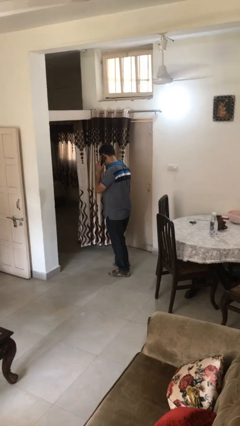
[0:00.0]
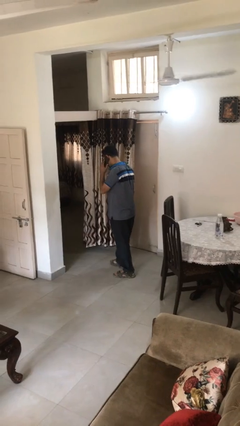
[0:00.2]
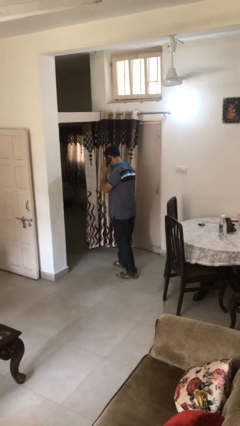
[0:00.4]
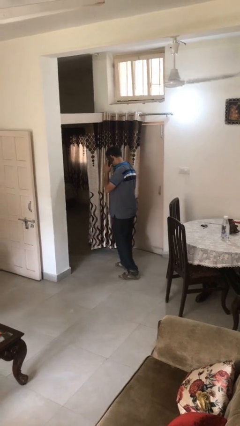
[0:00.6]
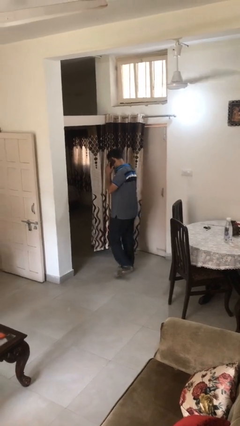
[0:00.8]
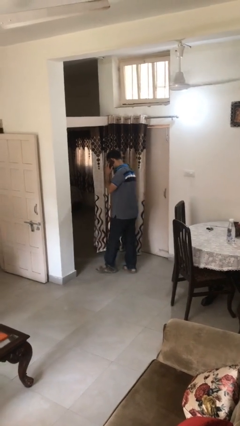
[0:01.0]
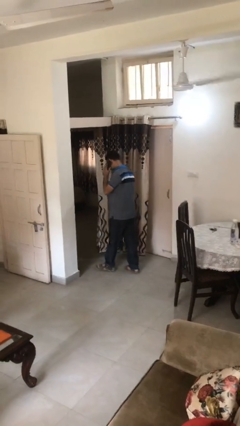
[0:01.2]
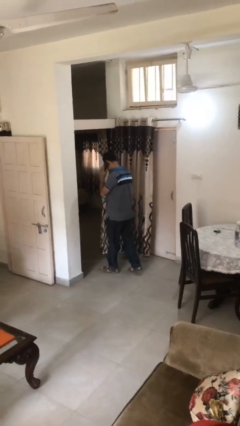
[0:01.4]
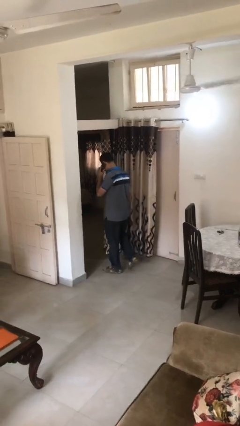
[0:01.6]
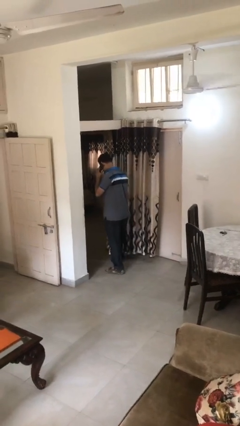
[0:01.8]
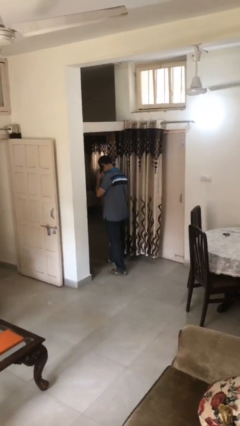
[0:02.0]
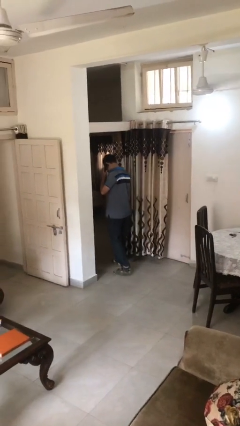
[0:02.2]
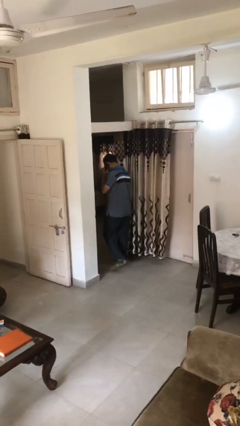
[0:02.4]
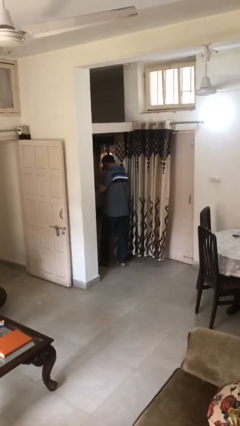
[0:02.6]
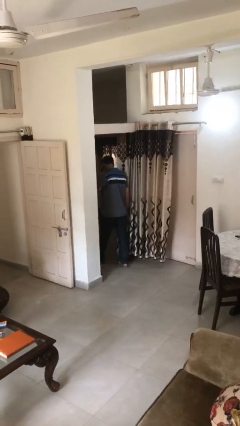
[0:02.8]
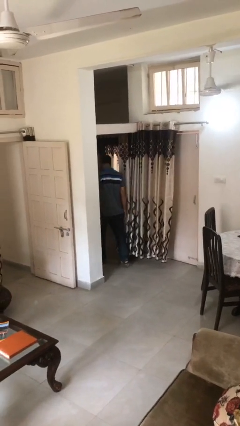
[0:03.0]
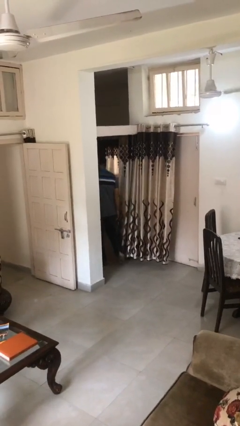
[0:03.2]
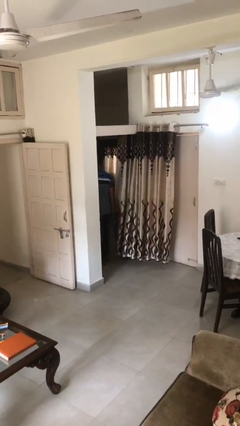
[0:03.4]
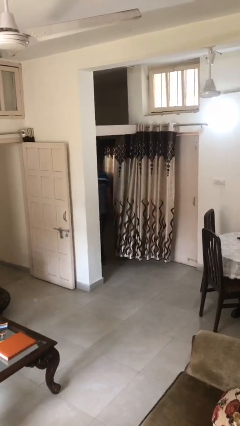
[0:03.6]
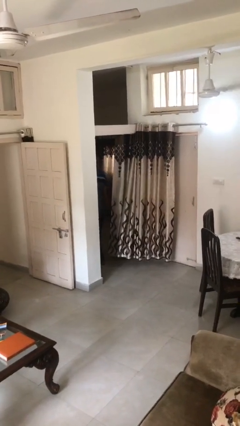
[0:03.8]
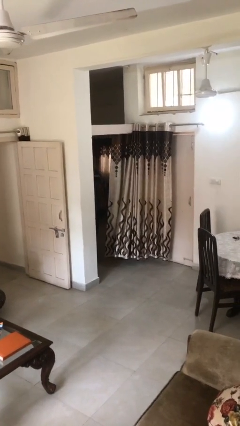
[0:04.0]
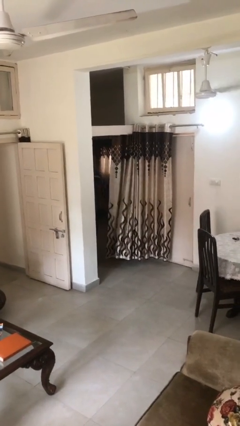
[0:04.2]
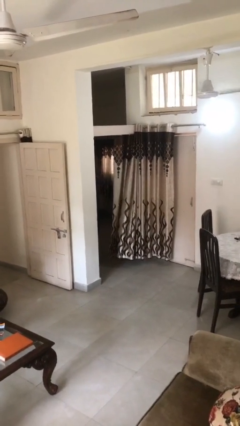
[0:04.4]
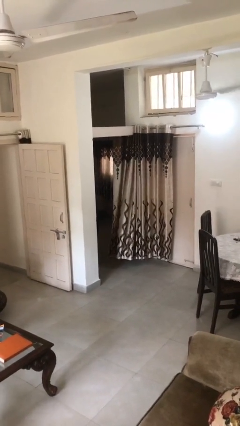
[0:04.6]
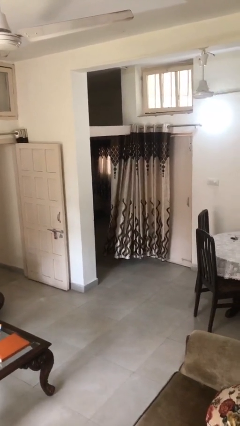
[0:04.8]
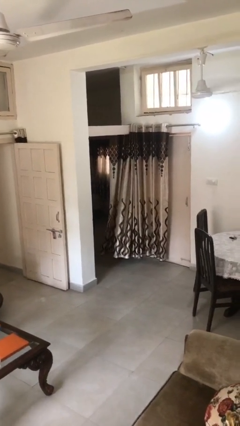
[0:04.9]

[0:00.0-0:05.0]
person exits scene through structure

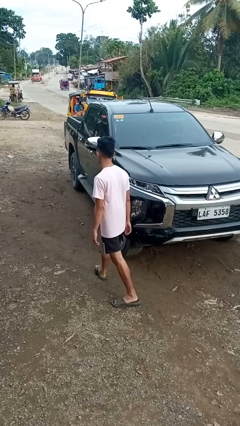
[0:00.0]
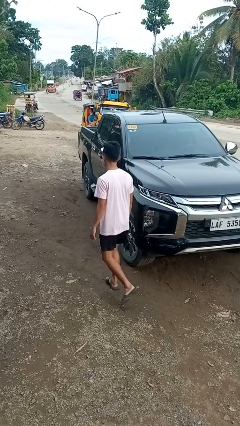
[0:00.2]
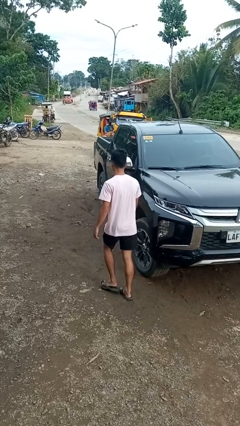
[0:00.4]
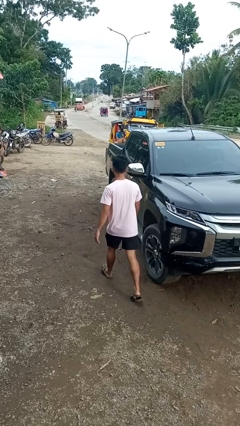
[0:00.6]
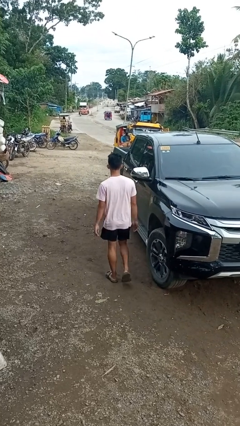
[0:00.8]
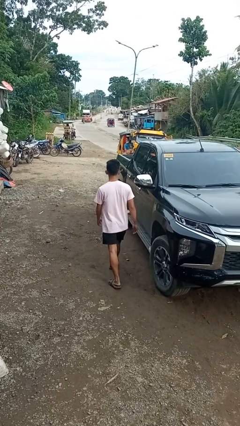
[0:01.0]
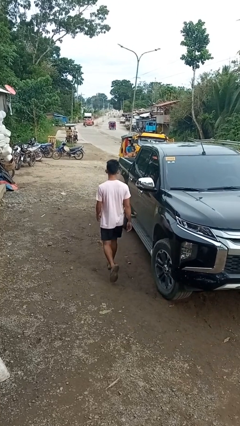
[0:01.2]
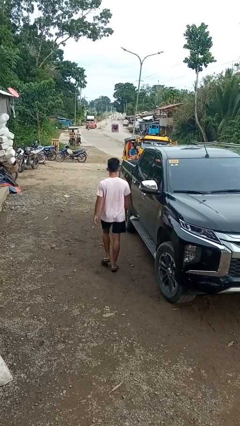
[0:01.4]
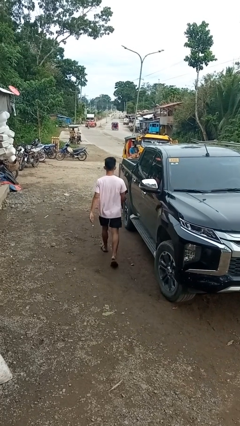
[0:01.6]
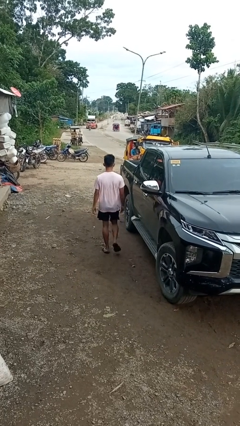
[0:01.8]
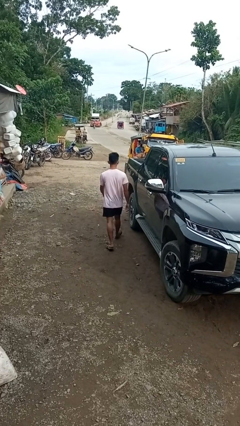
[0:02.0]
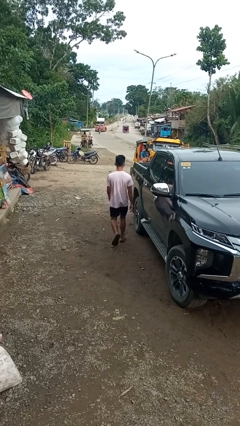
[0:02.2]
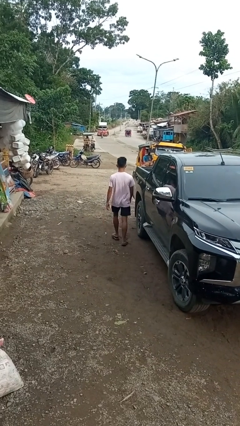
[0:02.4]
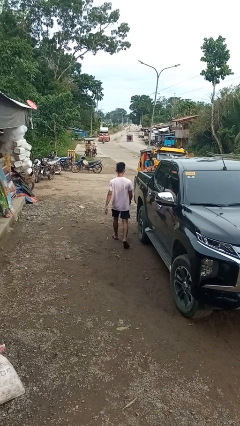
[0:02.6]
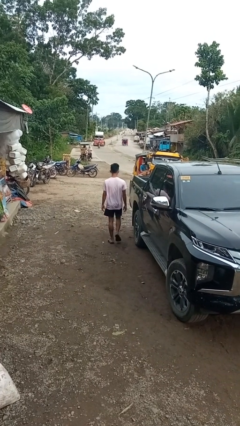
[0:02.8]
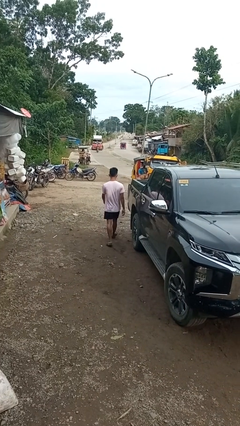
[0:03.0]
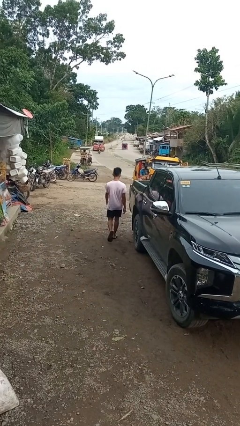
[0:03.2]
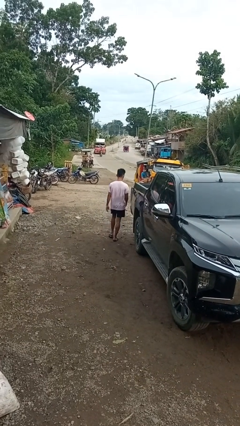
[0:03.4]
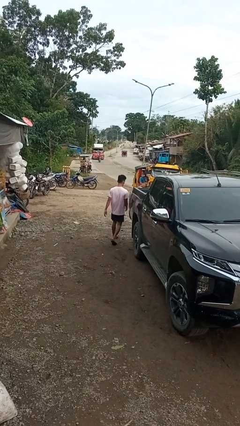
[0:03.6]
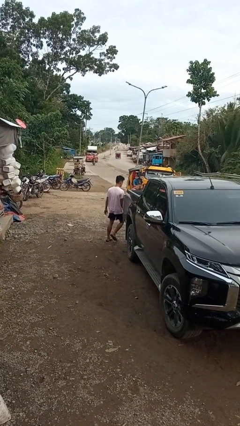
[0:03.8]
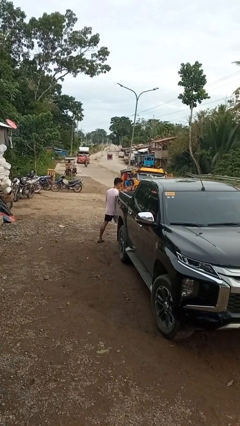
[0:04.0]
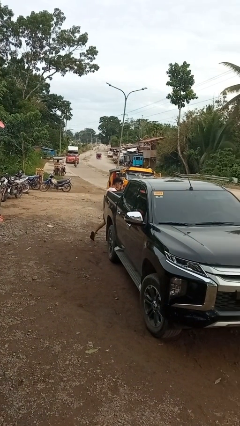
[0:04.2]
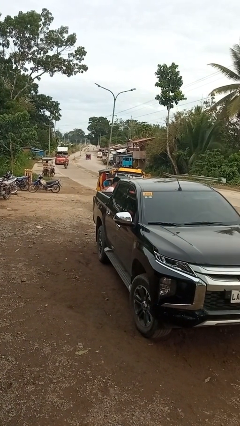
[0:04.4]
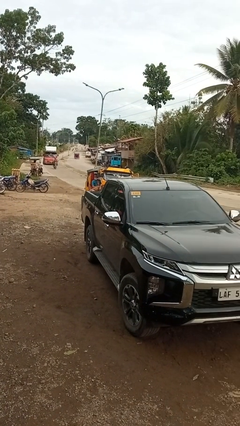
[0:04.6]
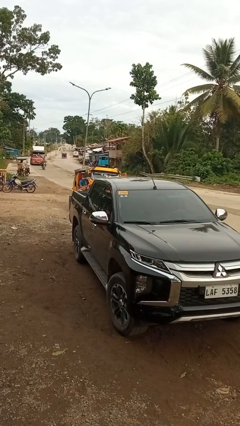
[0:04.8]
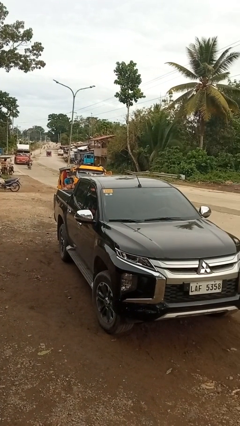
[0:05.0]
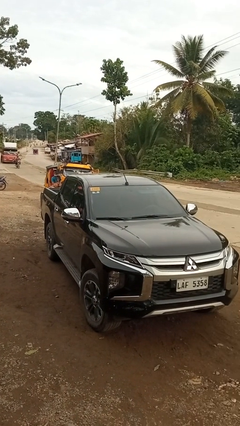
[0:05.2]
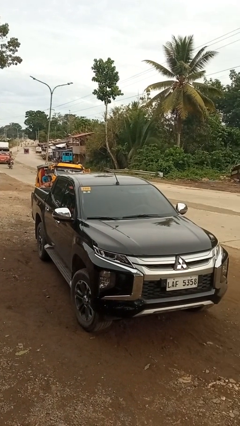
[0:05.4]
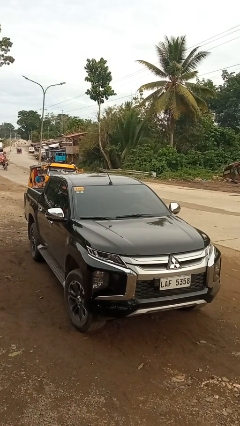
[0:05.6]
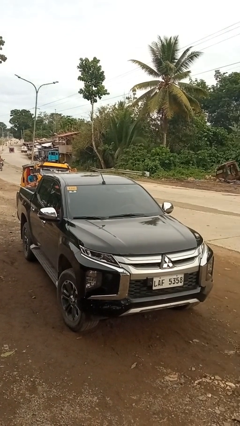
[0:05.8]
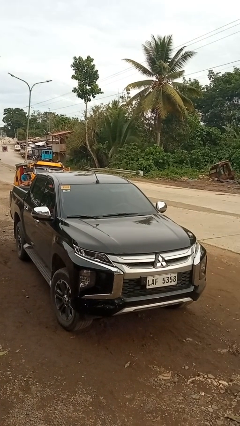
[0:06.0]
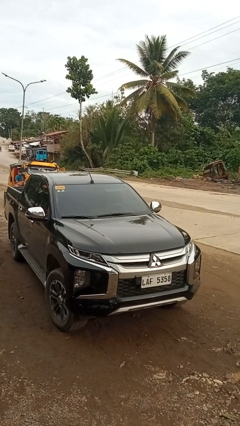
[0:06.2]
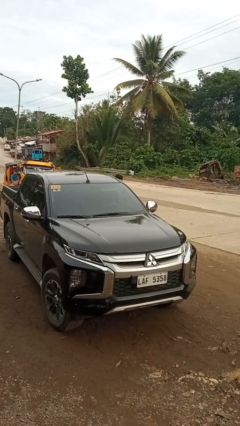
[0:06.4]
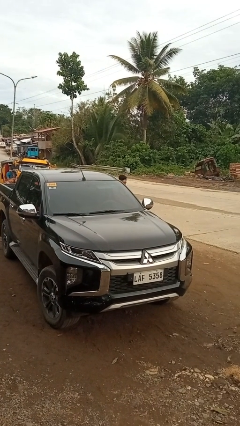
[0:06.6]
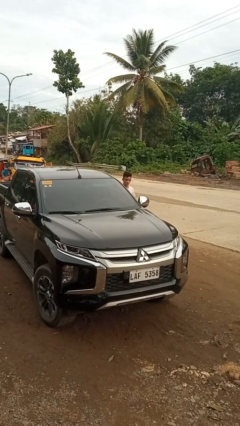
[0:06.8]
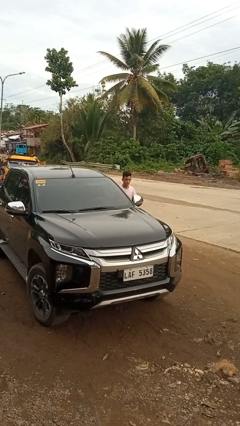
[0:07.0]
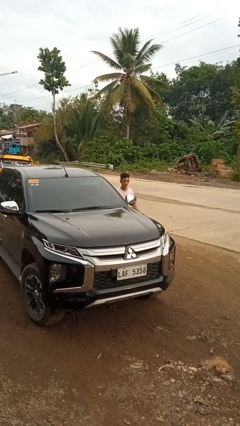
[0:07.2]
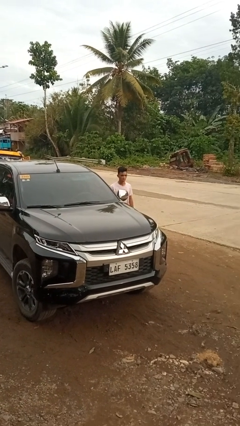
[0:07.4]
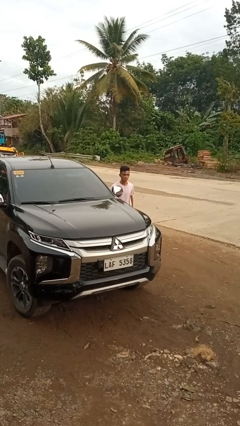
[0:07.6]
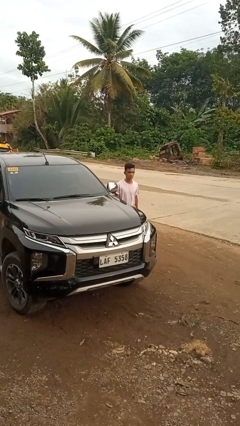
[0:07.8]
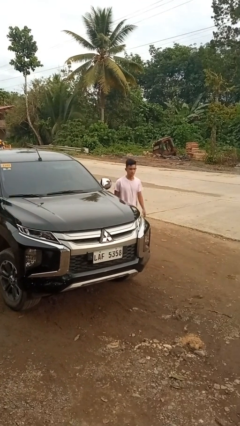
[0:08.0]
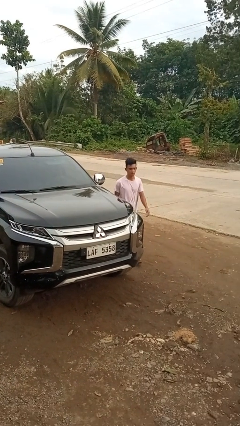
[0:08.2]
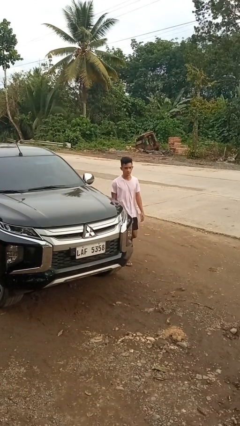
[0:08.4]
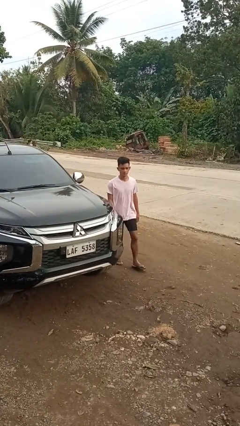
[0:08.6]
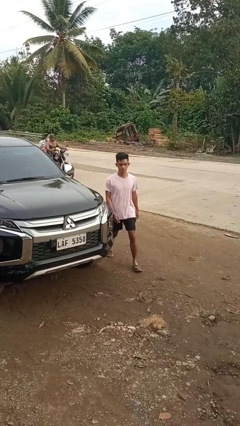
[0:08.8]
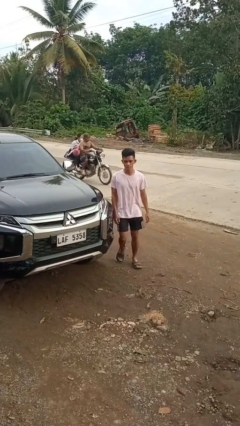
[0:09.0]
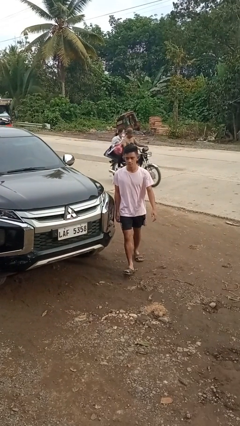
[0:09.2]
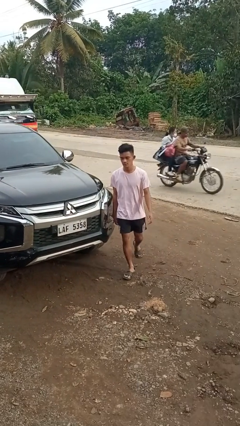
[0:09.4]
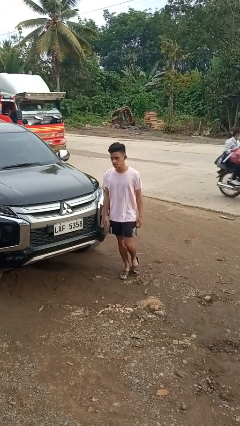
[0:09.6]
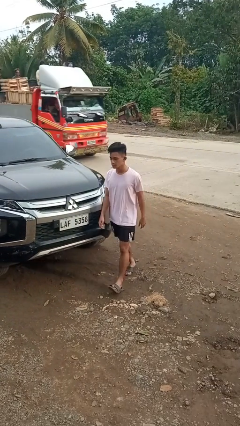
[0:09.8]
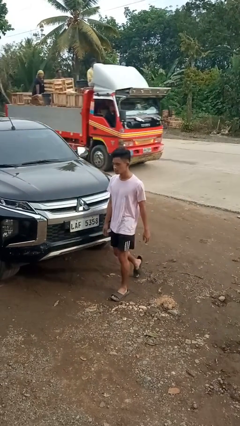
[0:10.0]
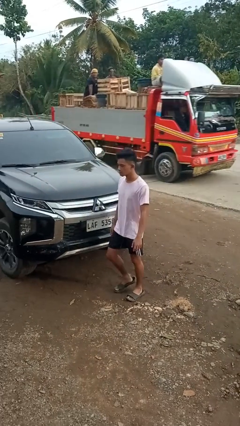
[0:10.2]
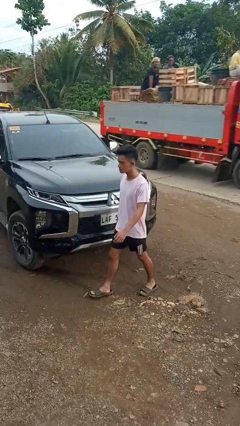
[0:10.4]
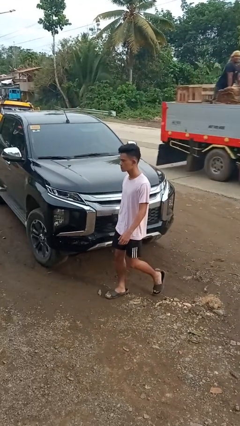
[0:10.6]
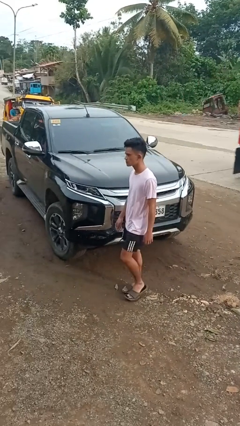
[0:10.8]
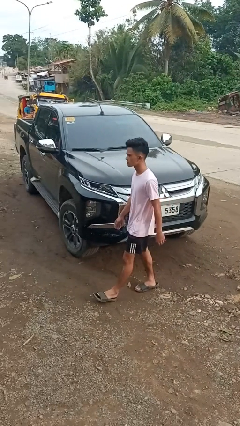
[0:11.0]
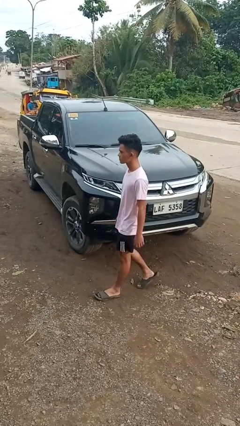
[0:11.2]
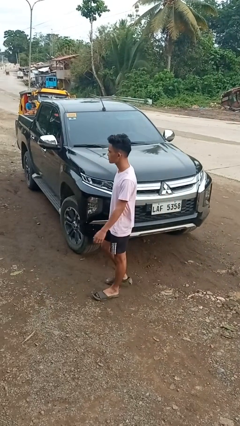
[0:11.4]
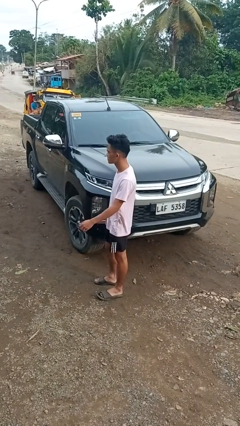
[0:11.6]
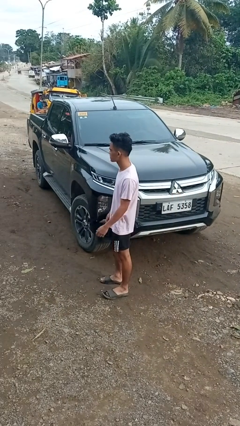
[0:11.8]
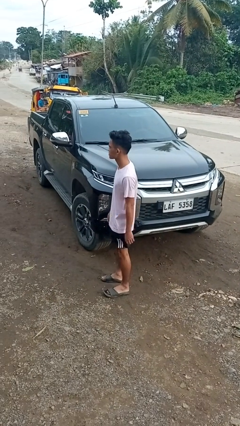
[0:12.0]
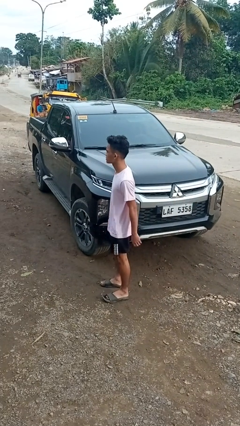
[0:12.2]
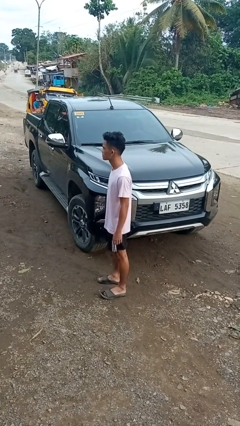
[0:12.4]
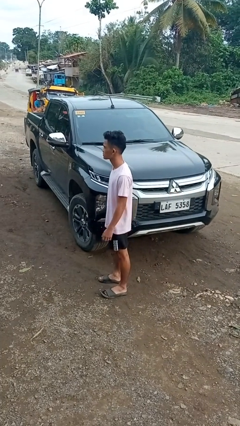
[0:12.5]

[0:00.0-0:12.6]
person walks around car

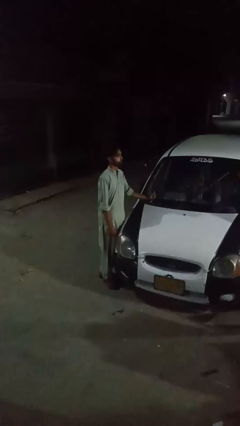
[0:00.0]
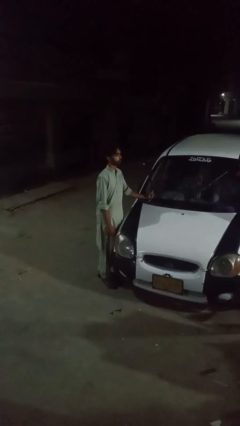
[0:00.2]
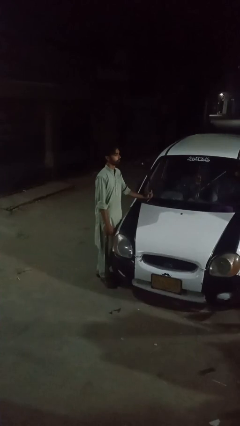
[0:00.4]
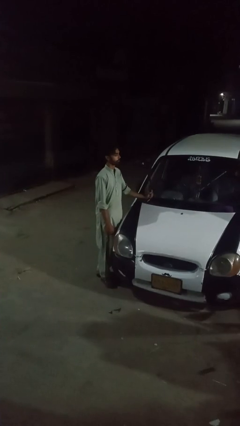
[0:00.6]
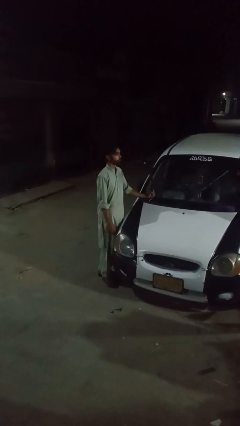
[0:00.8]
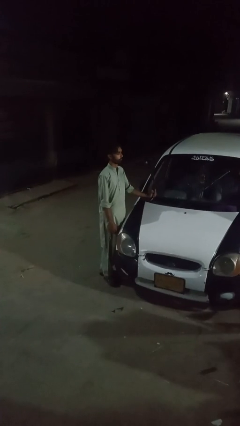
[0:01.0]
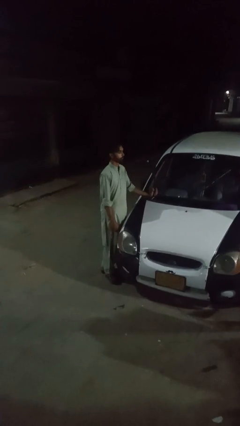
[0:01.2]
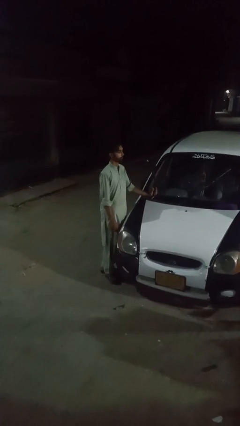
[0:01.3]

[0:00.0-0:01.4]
person flips up car wipers
